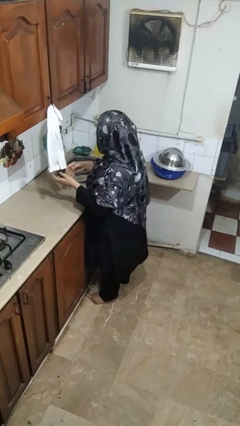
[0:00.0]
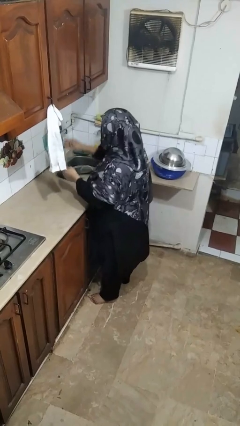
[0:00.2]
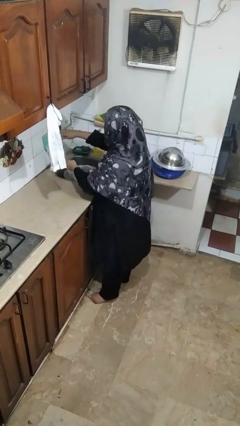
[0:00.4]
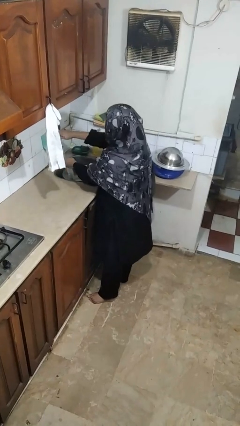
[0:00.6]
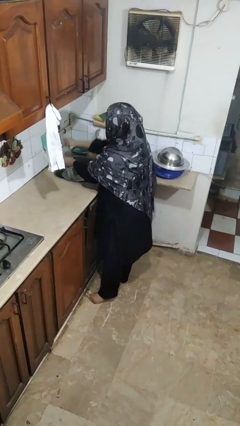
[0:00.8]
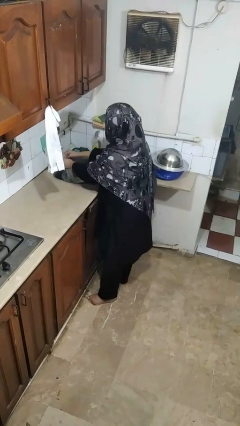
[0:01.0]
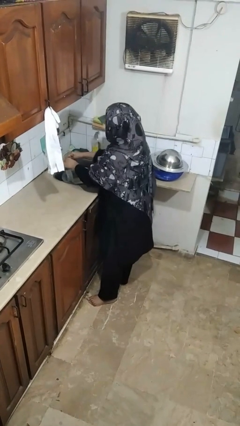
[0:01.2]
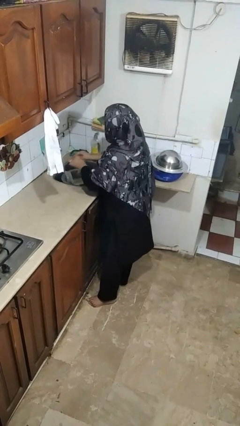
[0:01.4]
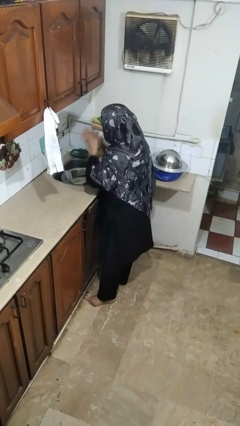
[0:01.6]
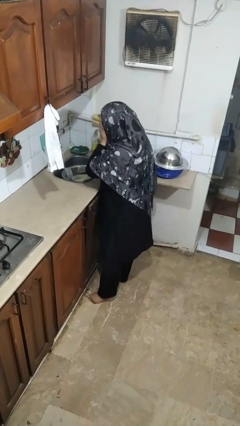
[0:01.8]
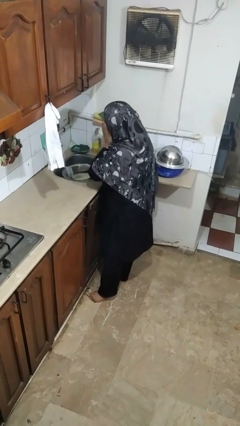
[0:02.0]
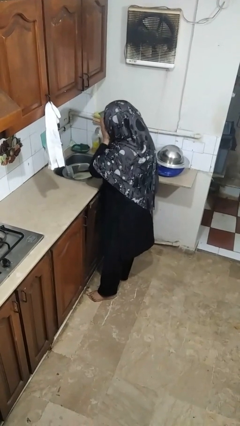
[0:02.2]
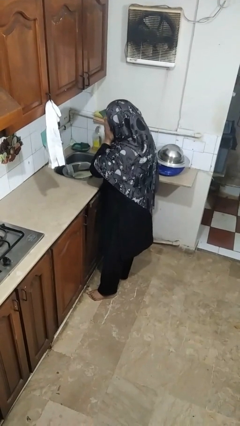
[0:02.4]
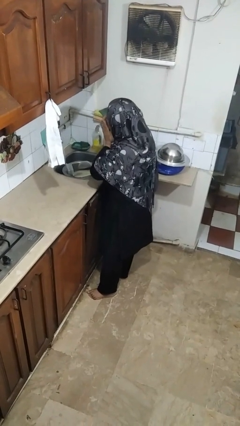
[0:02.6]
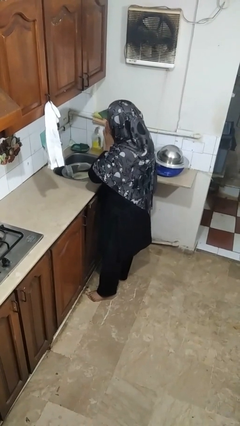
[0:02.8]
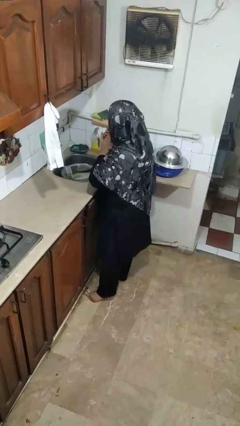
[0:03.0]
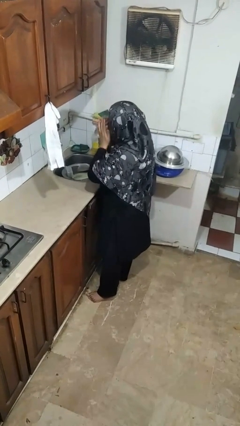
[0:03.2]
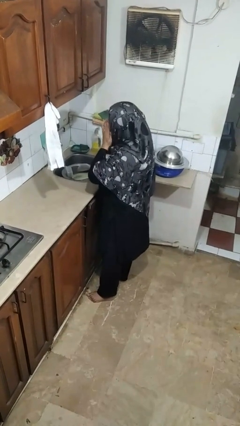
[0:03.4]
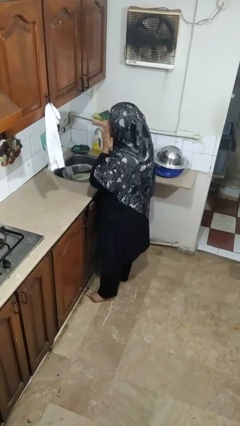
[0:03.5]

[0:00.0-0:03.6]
person washes face

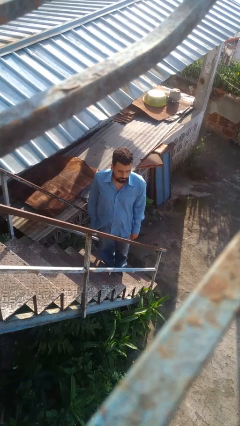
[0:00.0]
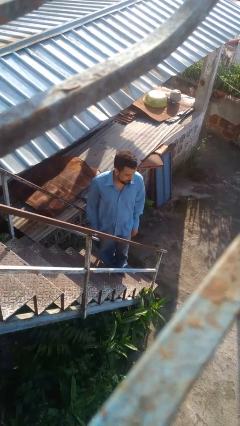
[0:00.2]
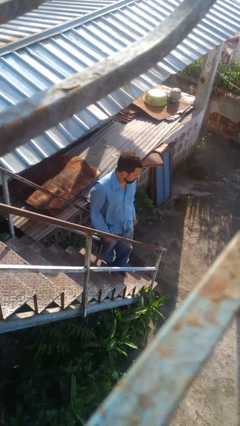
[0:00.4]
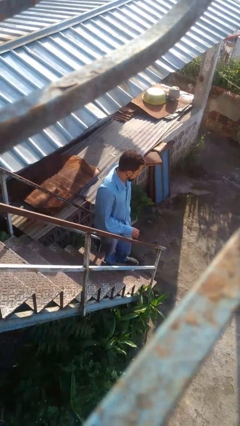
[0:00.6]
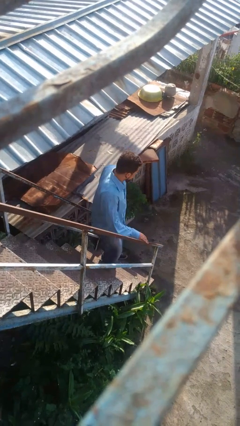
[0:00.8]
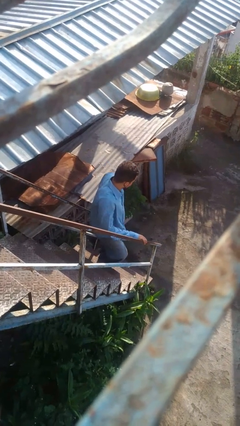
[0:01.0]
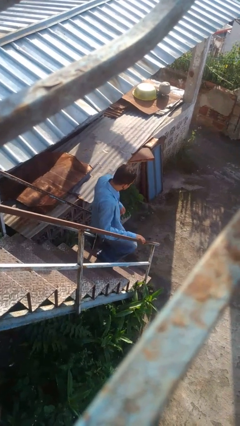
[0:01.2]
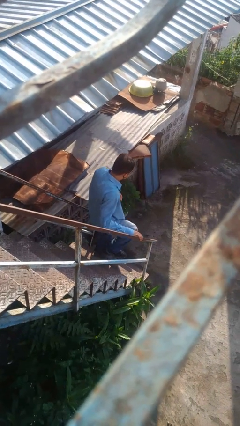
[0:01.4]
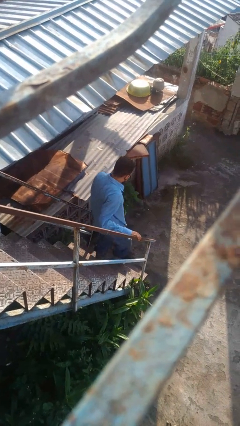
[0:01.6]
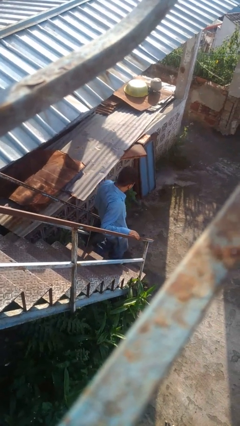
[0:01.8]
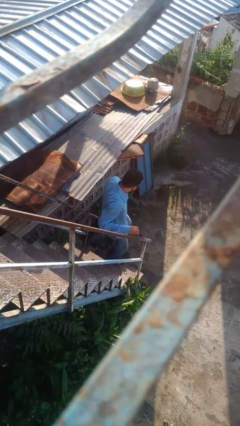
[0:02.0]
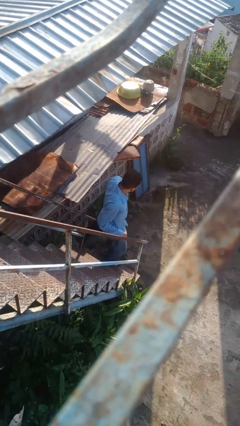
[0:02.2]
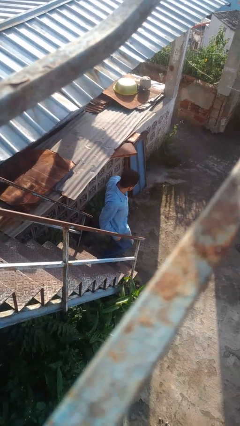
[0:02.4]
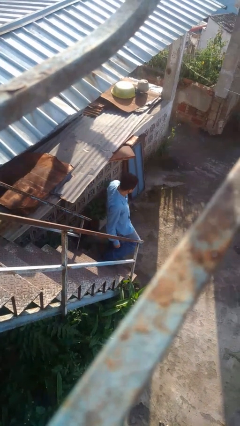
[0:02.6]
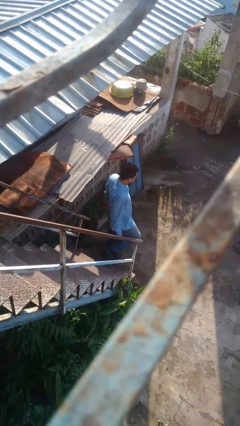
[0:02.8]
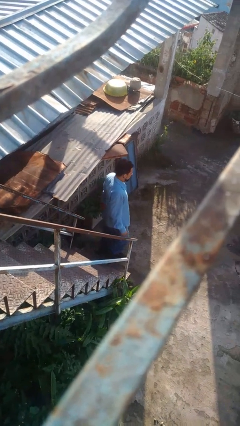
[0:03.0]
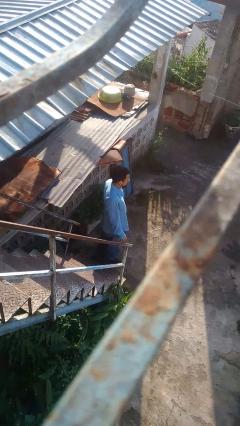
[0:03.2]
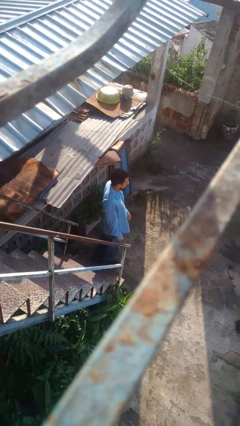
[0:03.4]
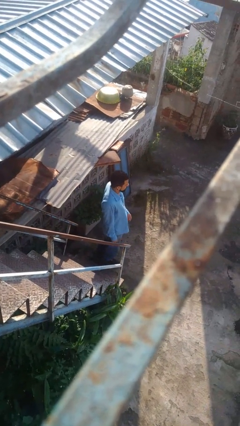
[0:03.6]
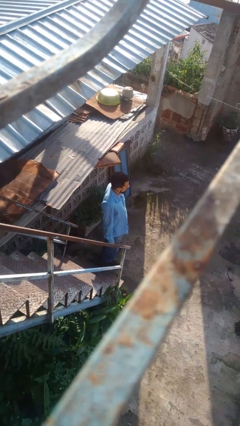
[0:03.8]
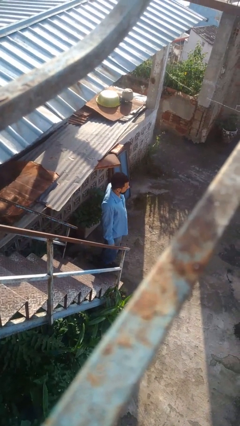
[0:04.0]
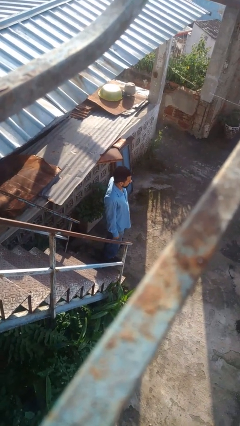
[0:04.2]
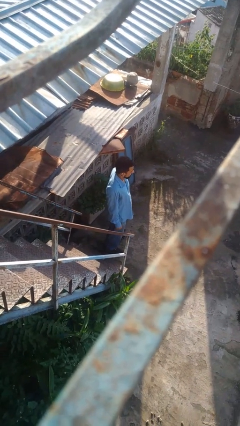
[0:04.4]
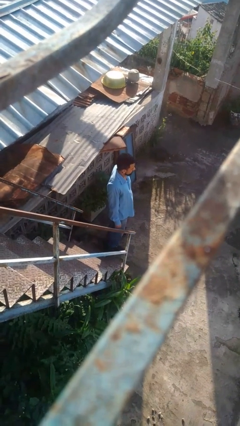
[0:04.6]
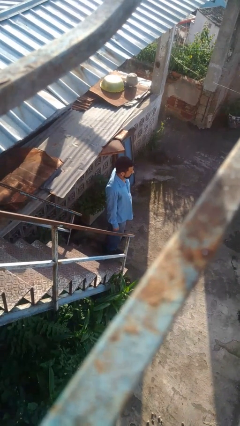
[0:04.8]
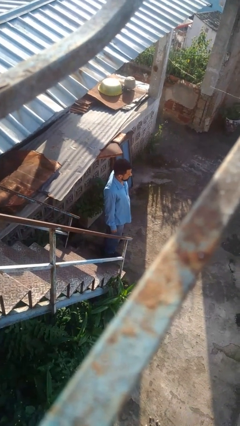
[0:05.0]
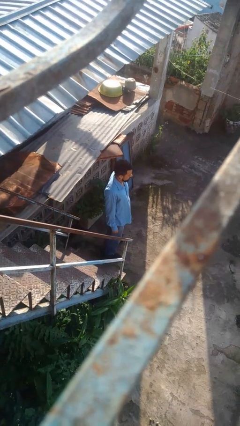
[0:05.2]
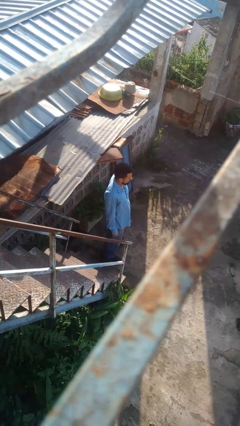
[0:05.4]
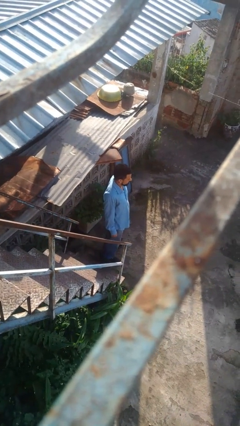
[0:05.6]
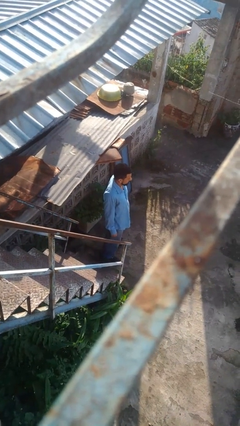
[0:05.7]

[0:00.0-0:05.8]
person climbs down stairs

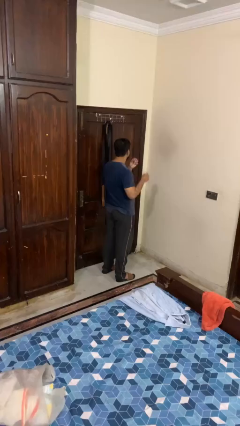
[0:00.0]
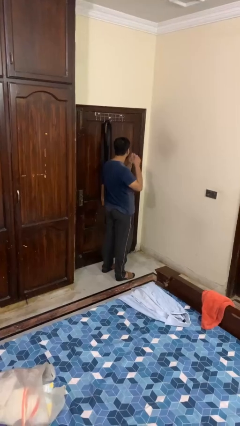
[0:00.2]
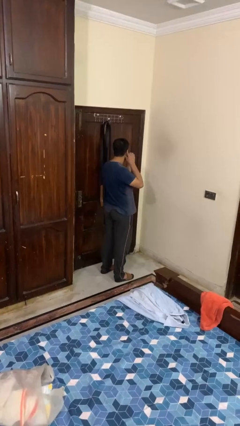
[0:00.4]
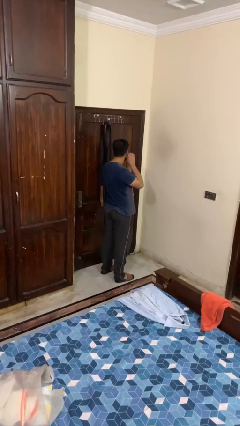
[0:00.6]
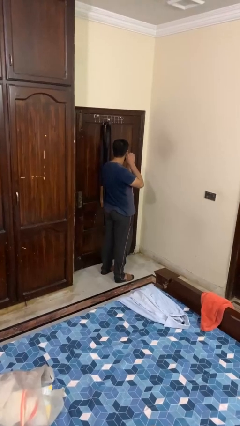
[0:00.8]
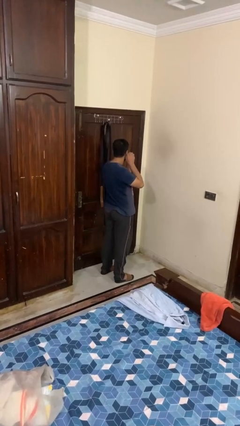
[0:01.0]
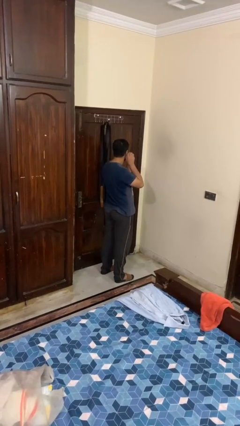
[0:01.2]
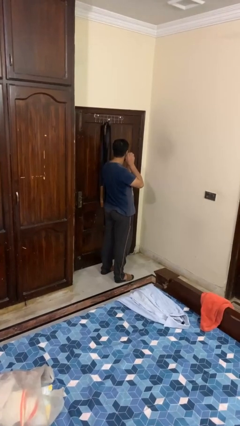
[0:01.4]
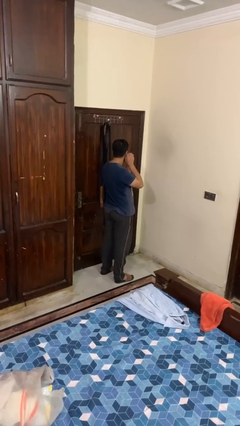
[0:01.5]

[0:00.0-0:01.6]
person puts on earrings

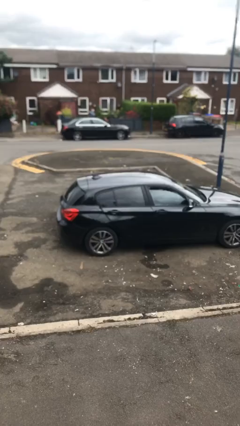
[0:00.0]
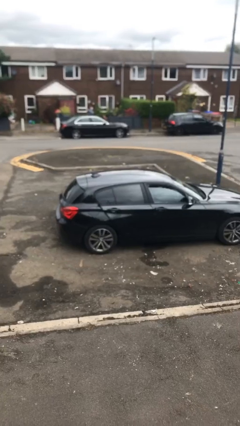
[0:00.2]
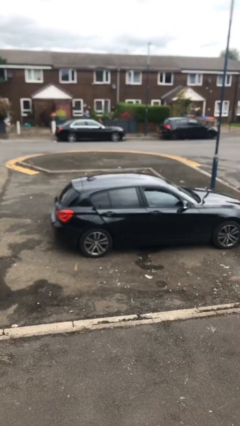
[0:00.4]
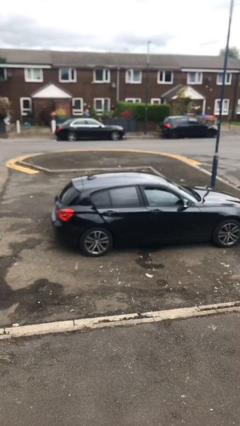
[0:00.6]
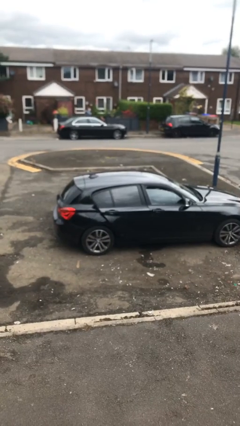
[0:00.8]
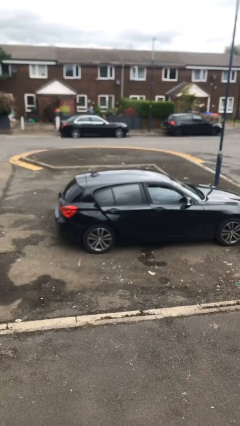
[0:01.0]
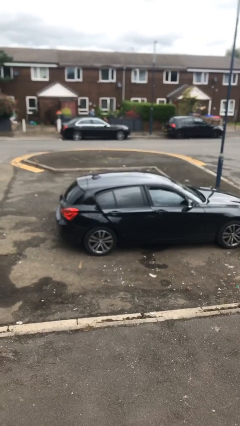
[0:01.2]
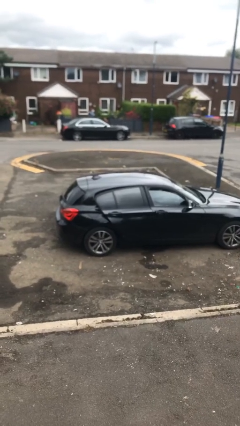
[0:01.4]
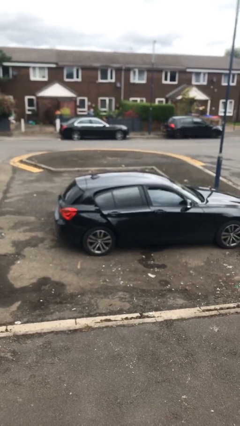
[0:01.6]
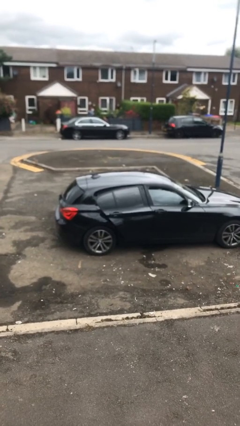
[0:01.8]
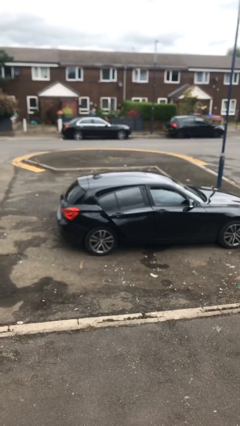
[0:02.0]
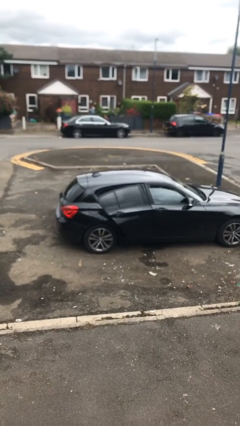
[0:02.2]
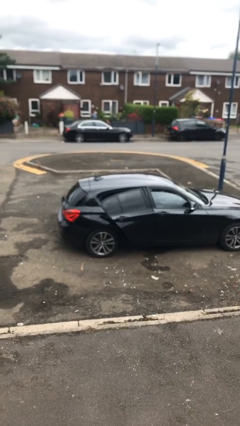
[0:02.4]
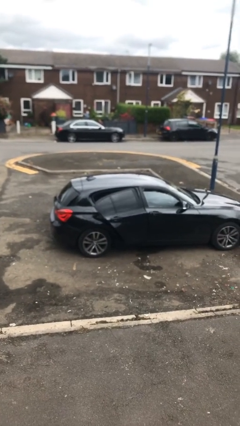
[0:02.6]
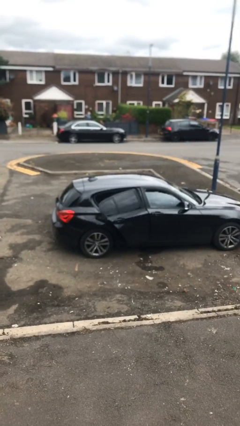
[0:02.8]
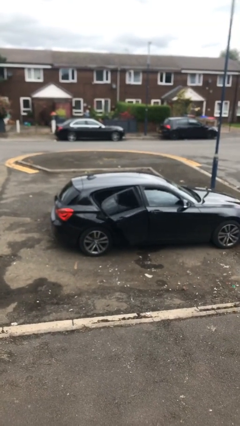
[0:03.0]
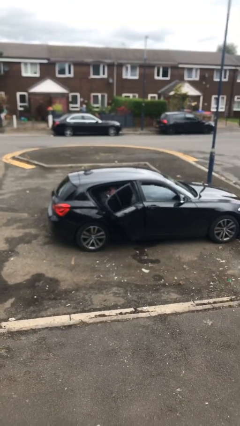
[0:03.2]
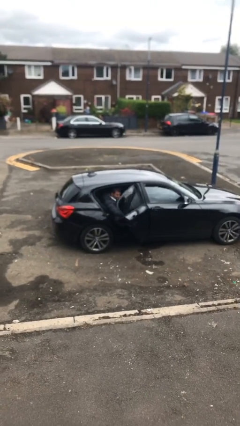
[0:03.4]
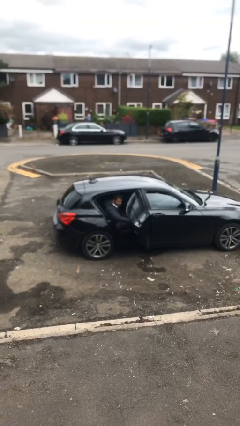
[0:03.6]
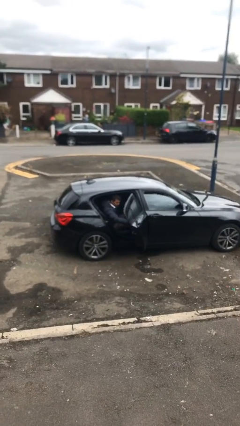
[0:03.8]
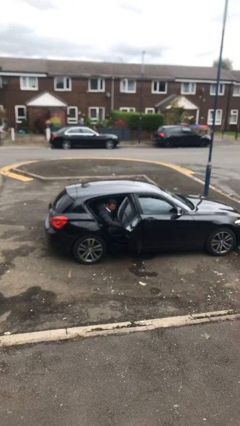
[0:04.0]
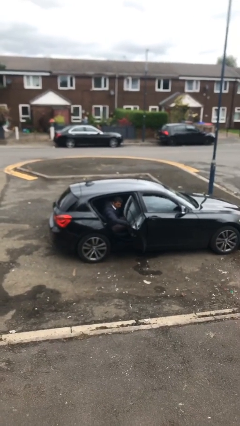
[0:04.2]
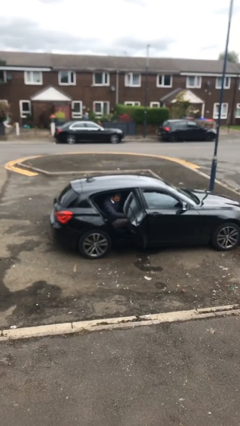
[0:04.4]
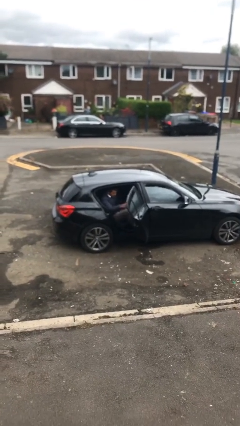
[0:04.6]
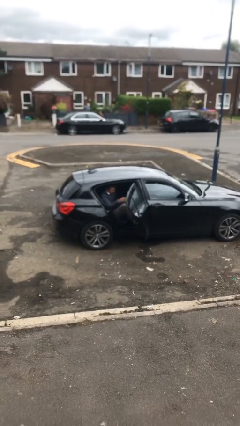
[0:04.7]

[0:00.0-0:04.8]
person opens car door

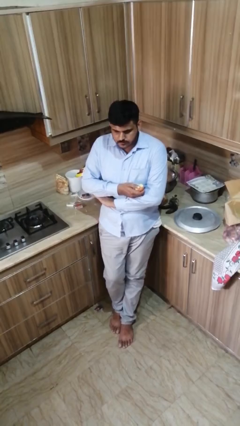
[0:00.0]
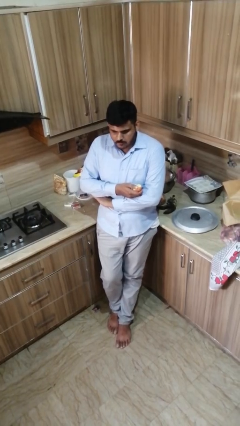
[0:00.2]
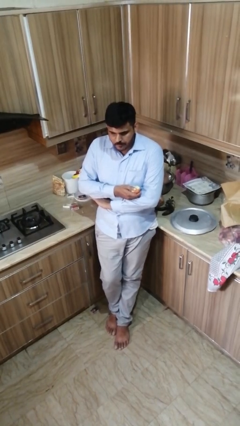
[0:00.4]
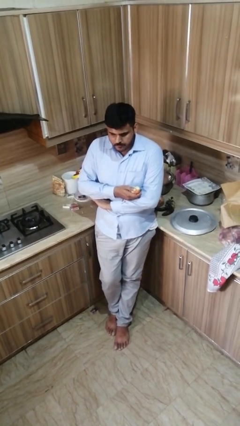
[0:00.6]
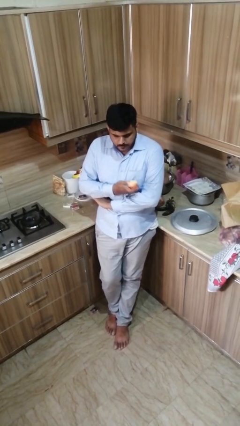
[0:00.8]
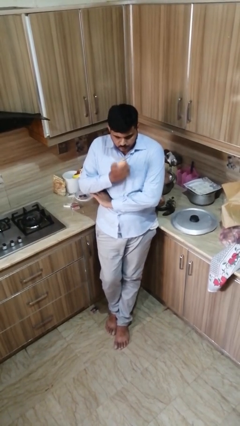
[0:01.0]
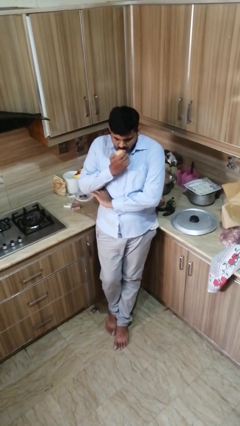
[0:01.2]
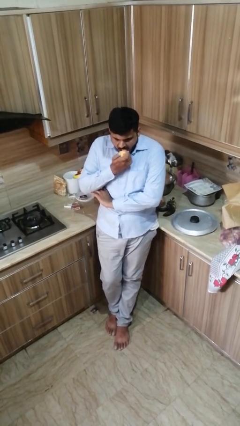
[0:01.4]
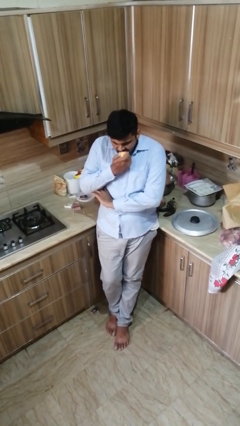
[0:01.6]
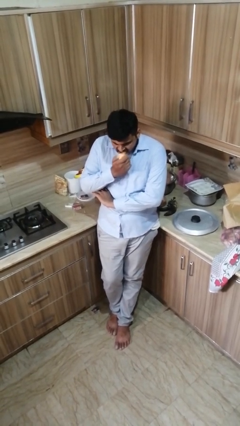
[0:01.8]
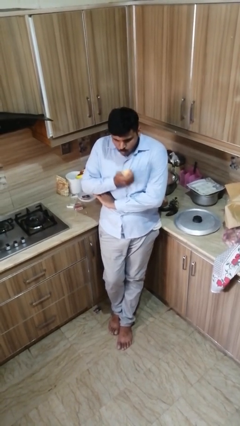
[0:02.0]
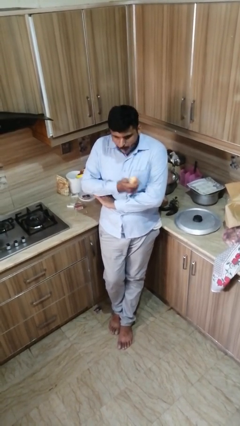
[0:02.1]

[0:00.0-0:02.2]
person eats apple
